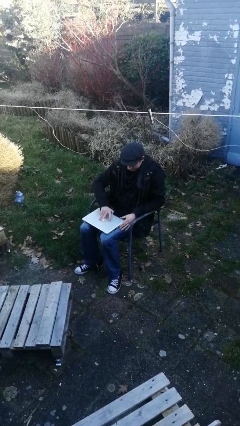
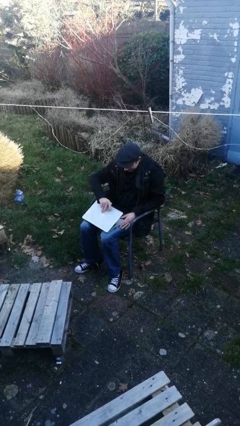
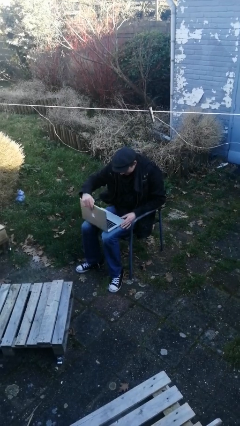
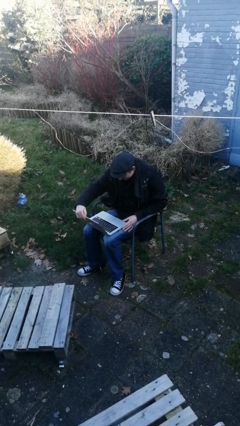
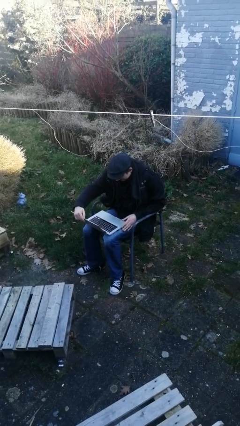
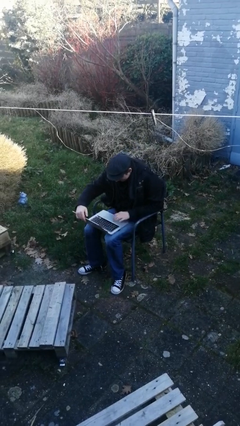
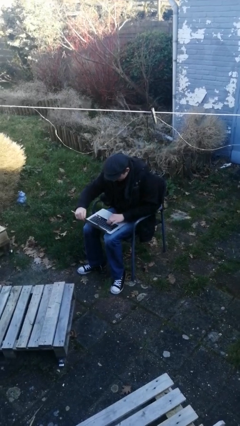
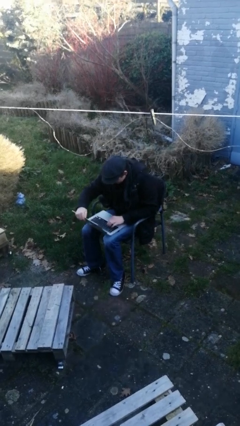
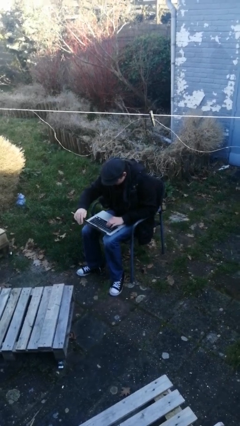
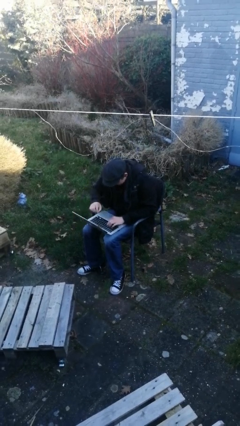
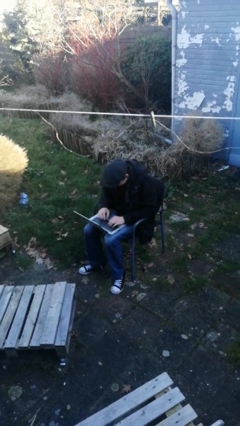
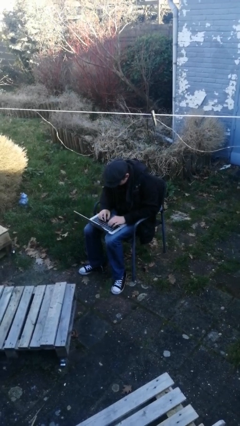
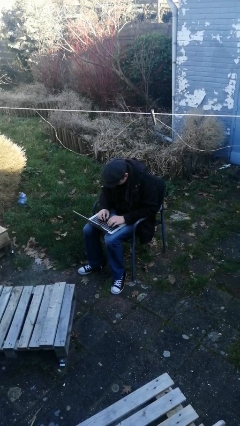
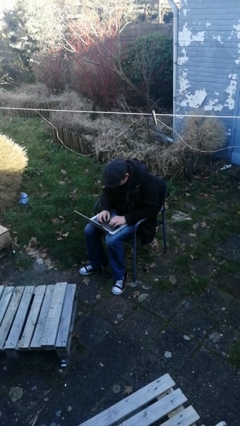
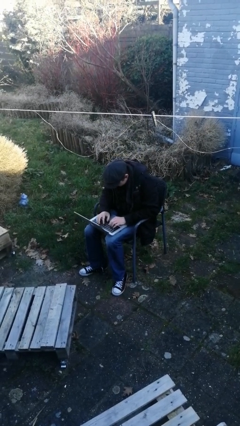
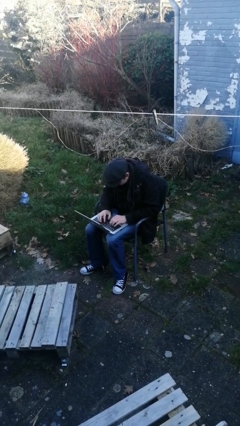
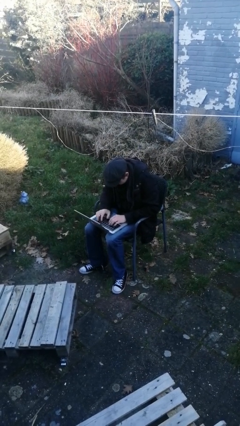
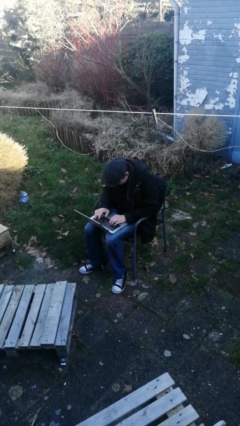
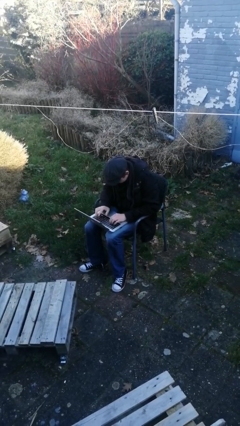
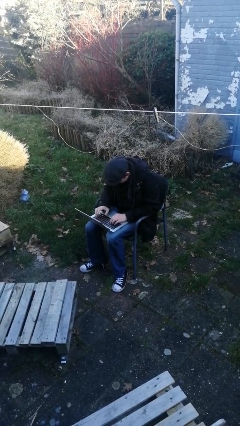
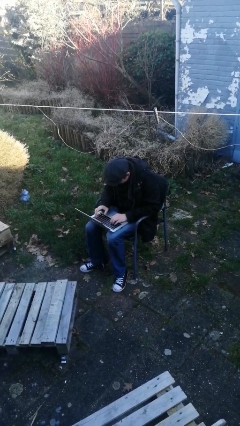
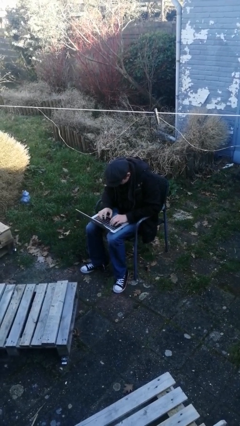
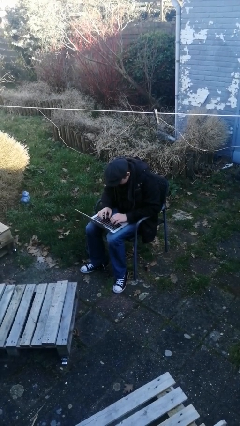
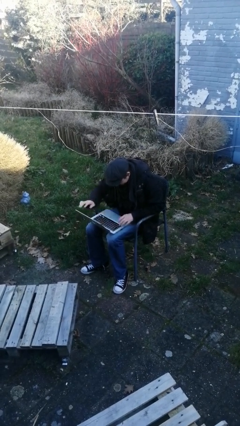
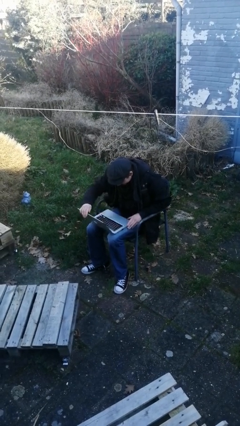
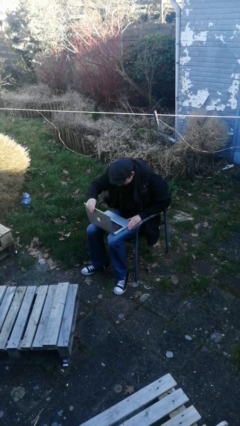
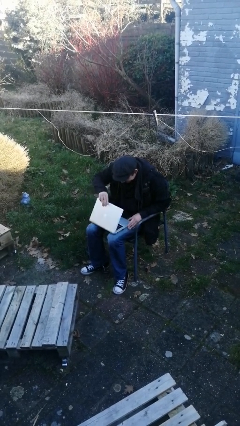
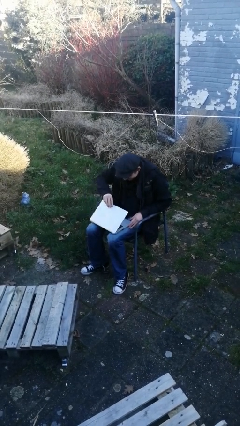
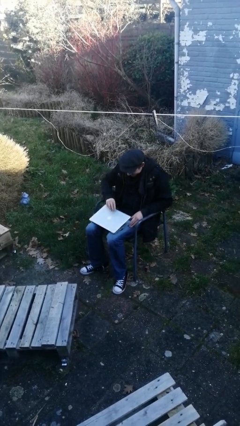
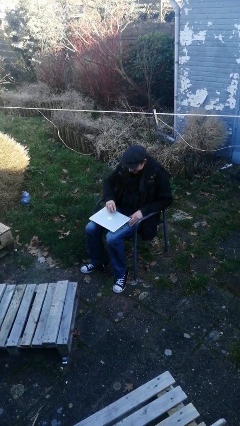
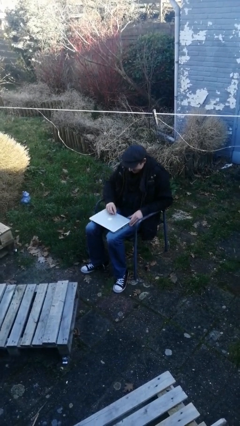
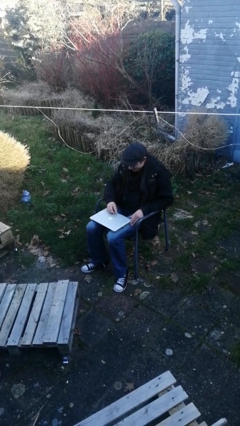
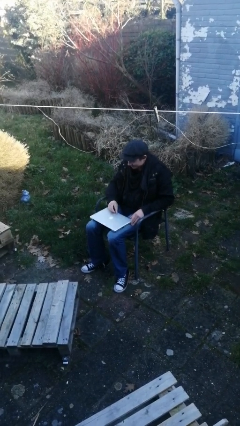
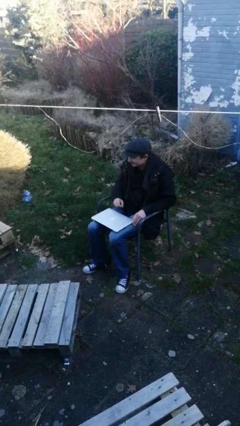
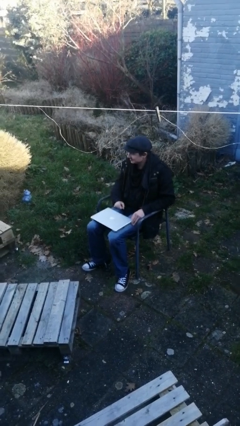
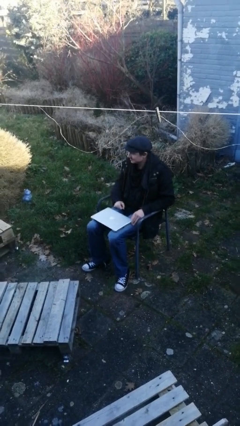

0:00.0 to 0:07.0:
person interacts with laptop

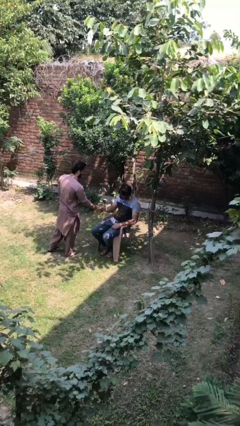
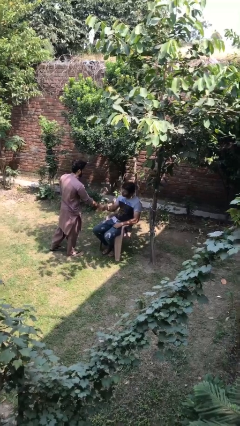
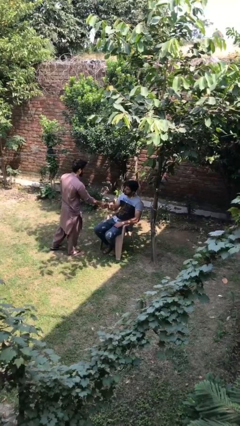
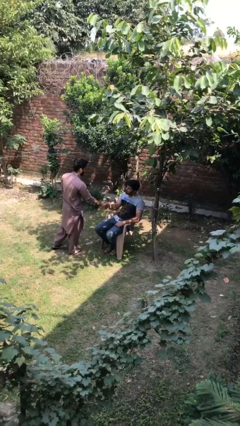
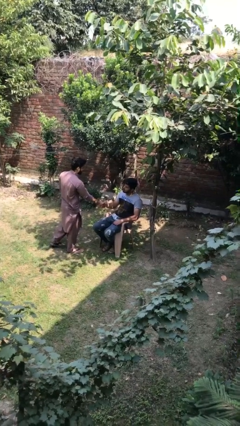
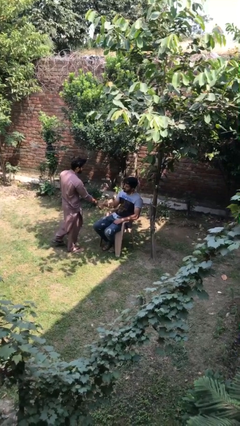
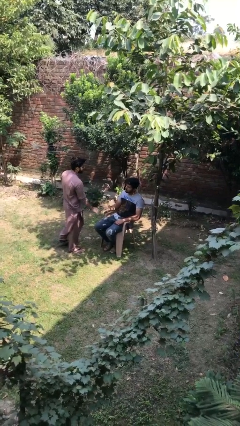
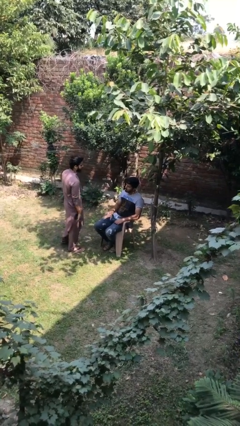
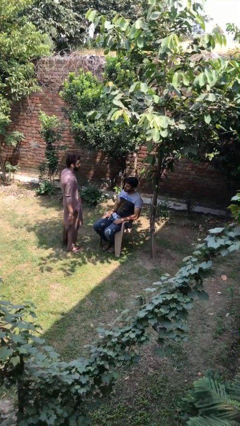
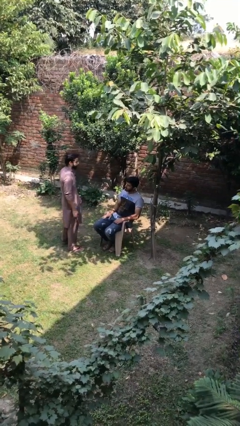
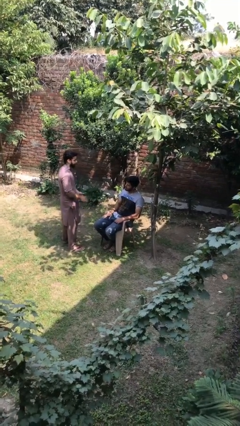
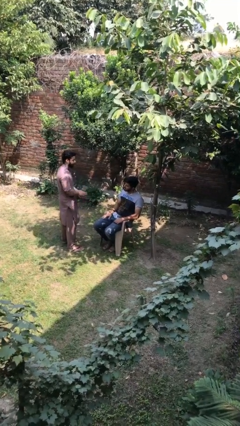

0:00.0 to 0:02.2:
person shakes hand

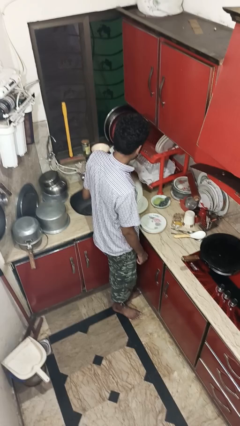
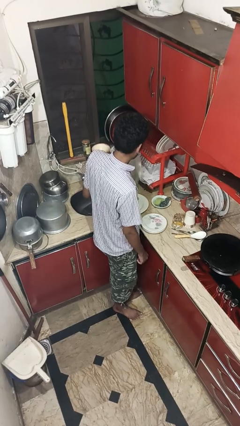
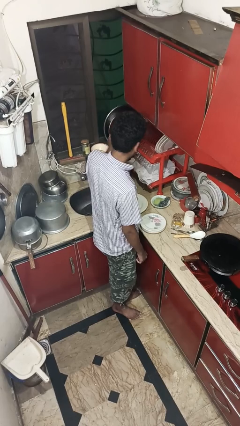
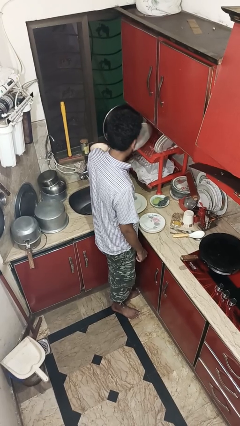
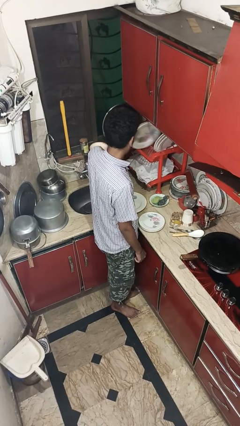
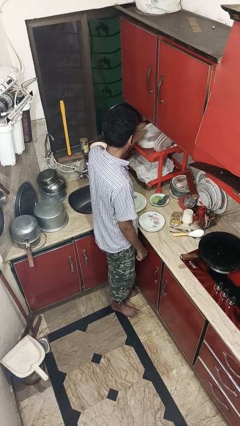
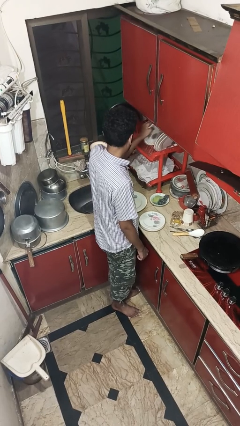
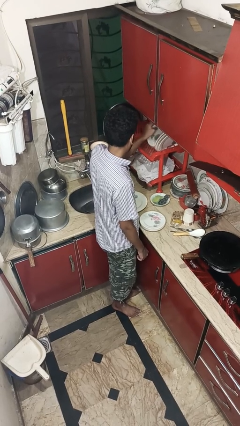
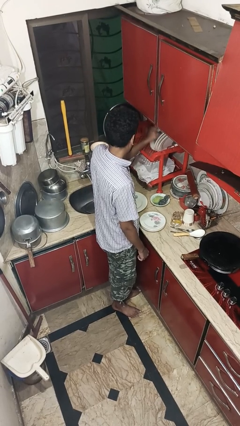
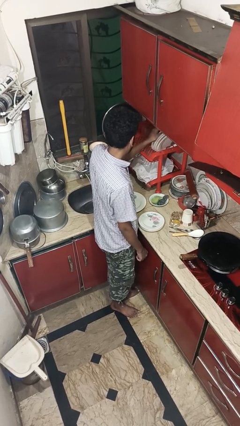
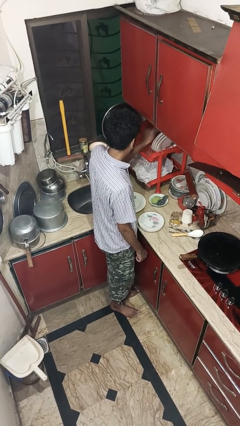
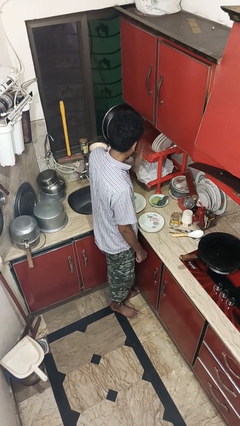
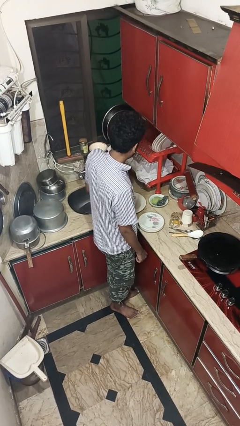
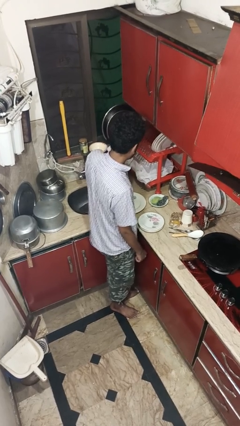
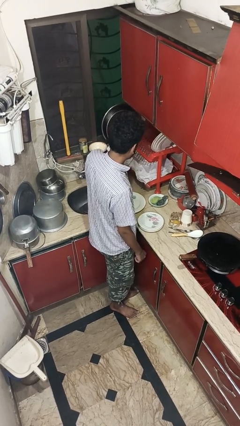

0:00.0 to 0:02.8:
person loads dishwasher

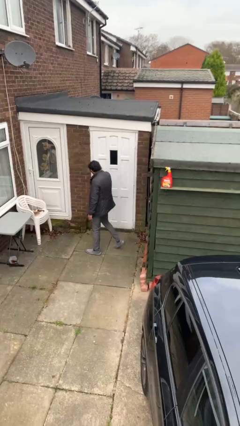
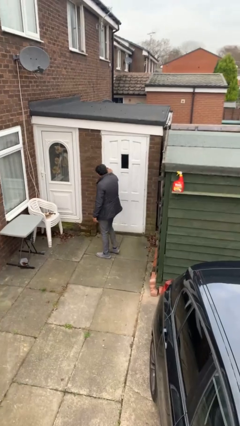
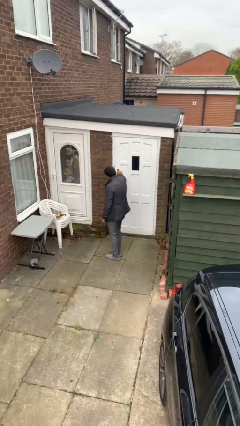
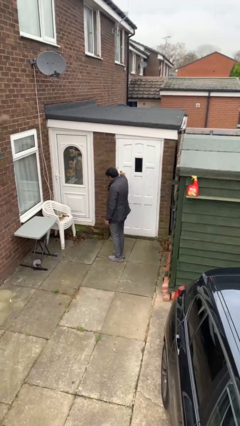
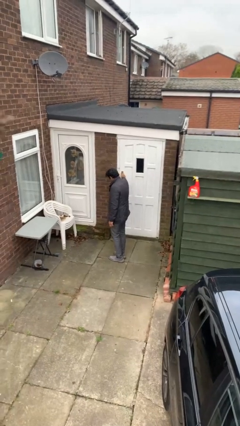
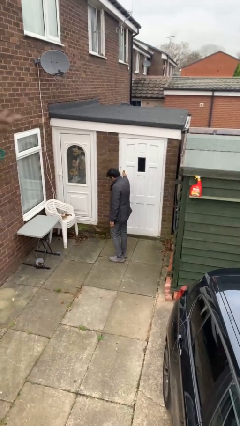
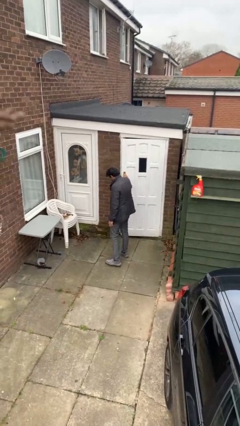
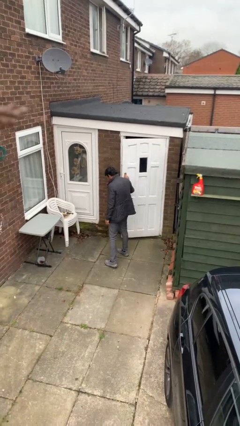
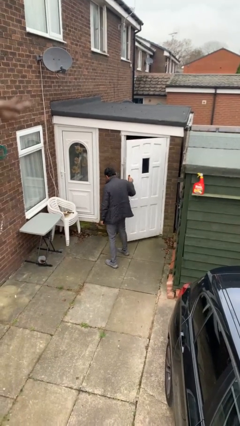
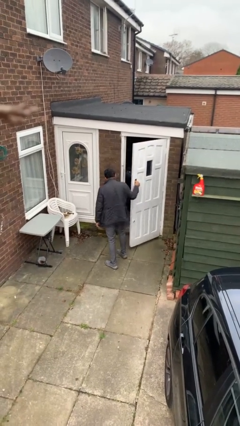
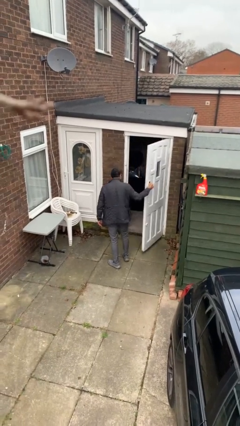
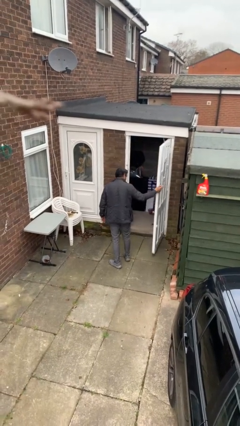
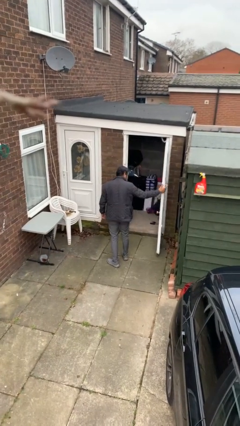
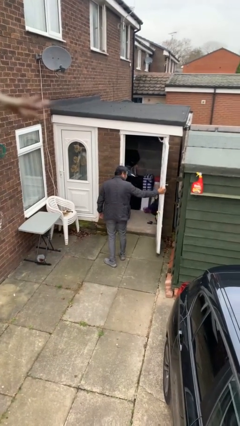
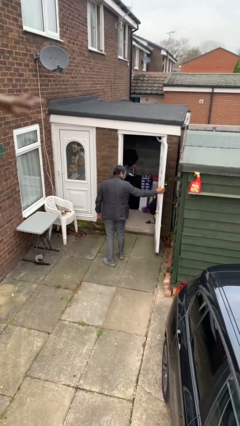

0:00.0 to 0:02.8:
person opens facility door

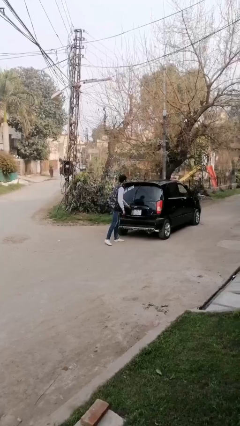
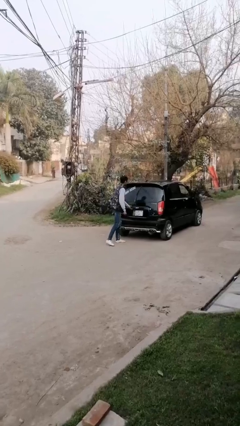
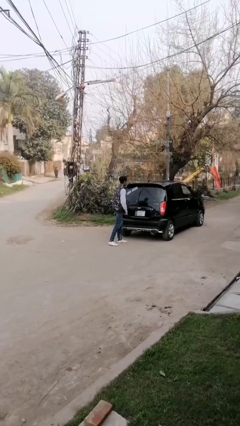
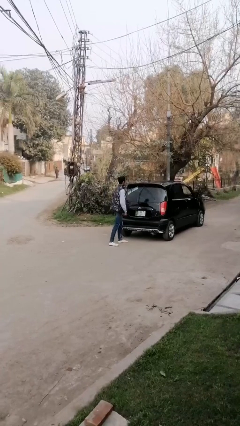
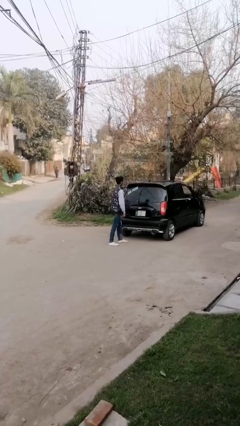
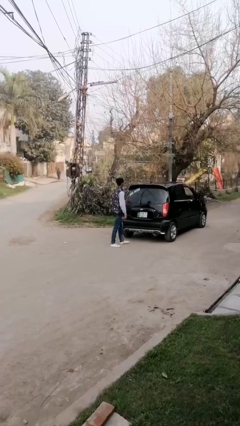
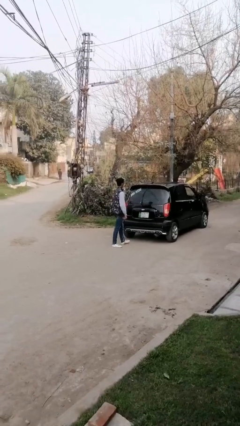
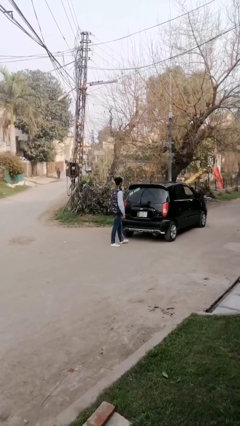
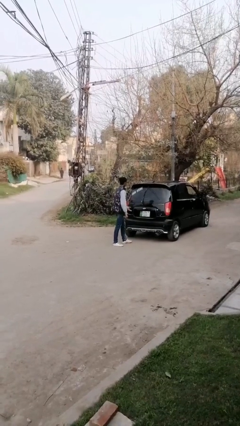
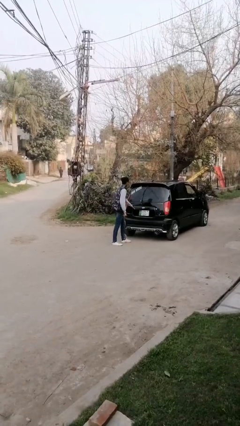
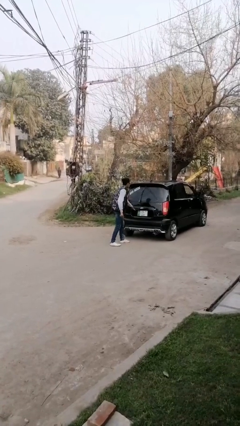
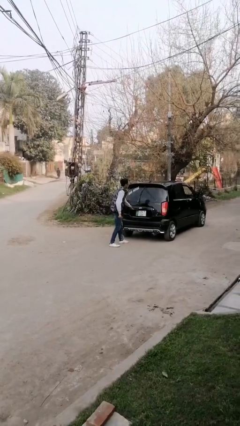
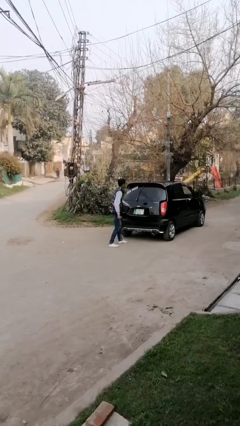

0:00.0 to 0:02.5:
person closes car trunk
